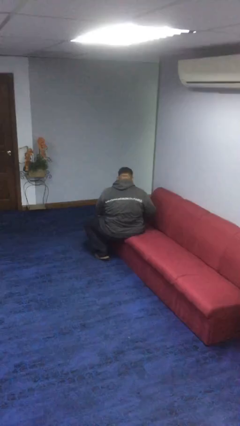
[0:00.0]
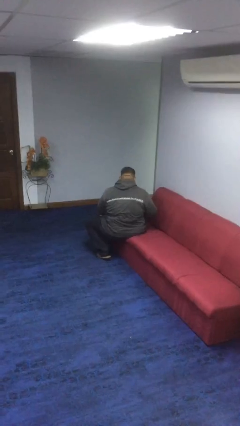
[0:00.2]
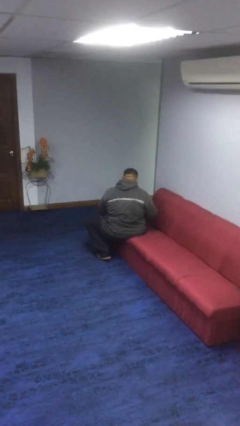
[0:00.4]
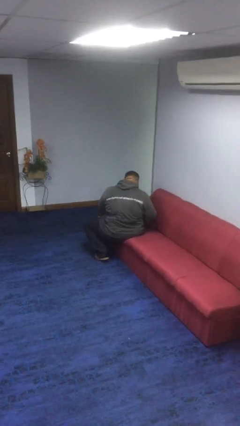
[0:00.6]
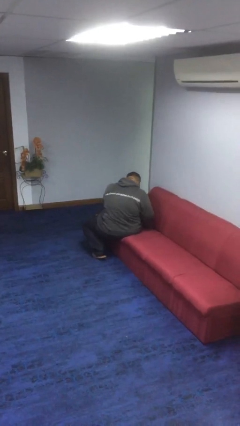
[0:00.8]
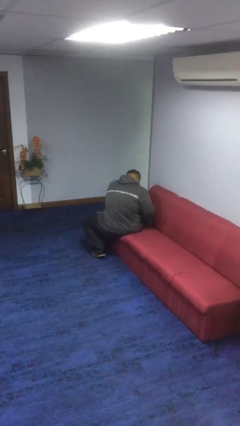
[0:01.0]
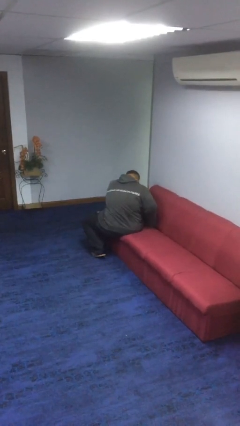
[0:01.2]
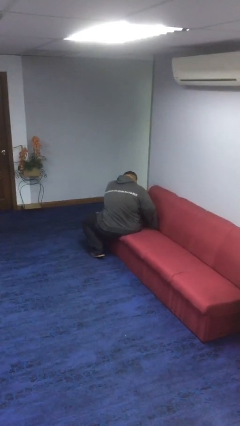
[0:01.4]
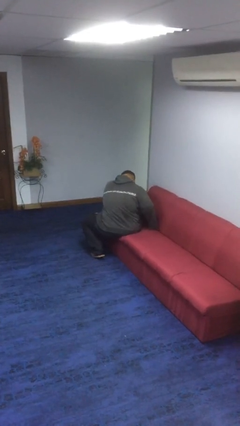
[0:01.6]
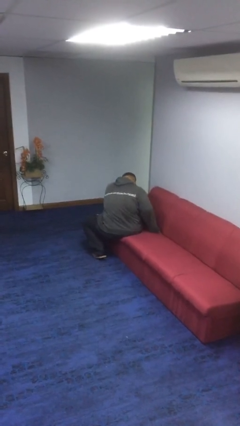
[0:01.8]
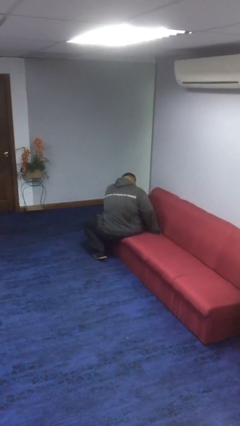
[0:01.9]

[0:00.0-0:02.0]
person searches in couch

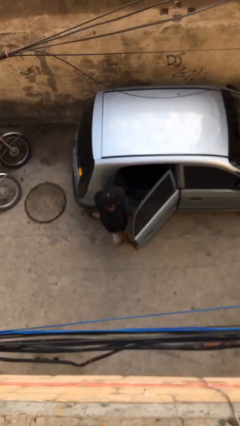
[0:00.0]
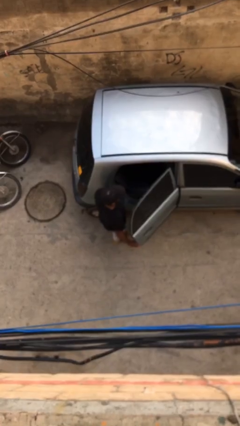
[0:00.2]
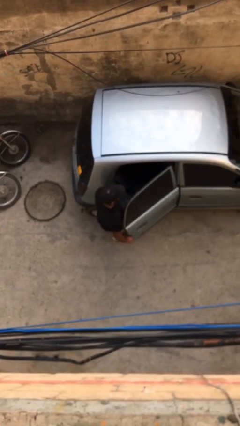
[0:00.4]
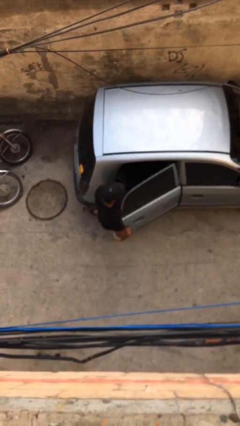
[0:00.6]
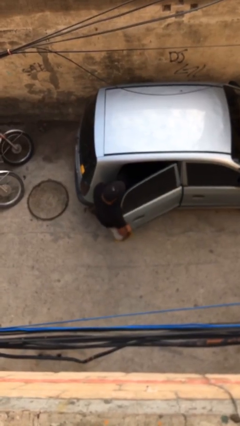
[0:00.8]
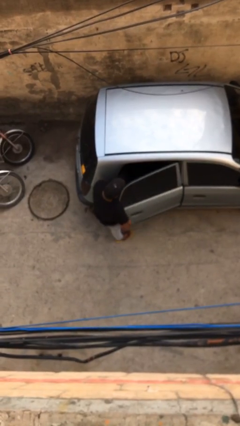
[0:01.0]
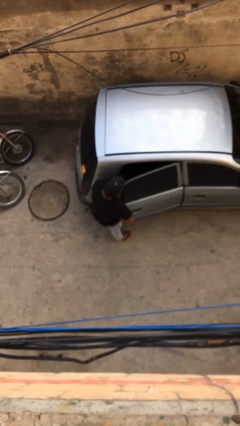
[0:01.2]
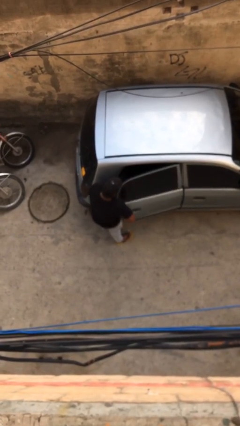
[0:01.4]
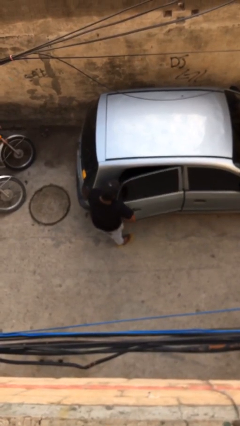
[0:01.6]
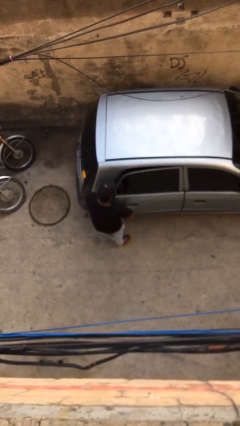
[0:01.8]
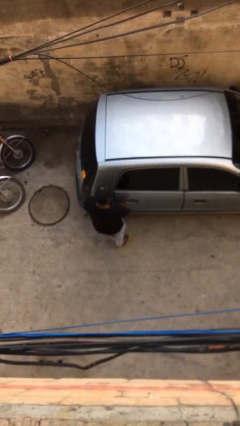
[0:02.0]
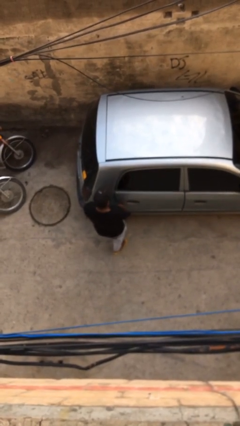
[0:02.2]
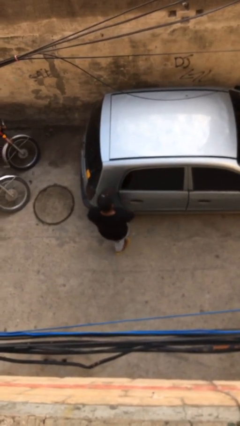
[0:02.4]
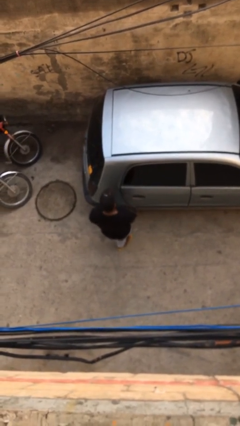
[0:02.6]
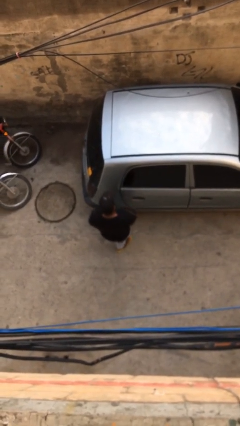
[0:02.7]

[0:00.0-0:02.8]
person closes car door

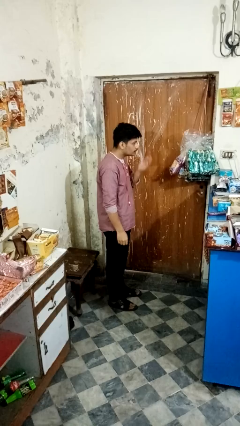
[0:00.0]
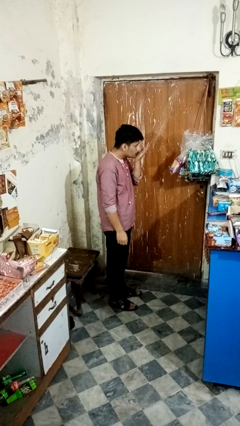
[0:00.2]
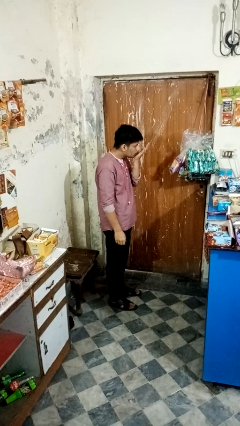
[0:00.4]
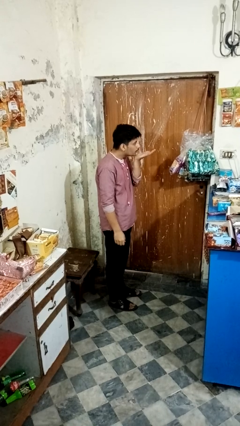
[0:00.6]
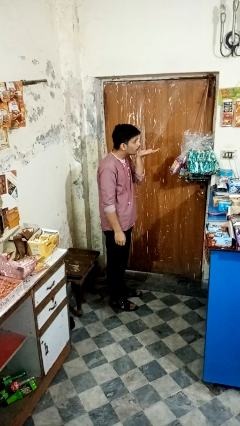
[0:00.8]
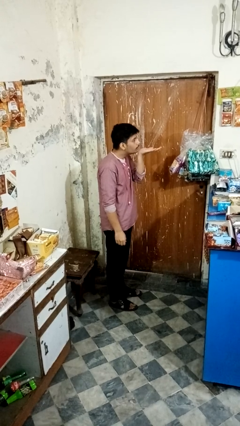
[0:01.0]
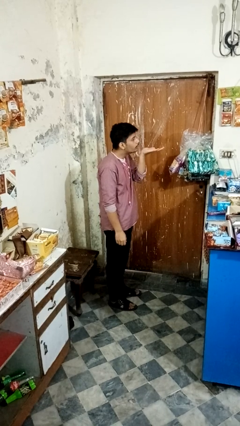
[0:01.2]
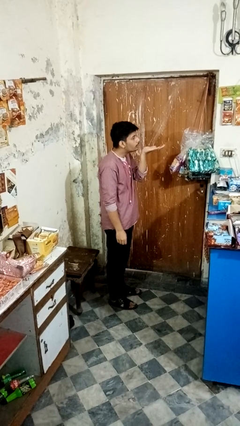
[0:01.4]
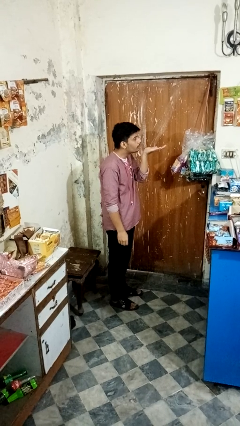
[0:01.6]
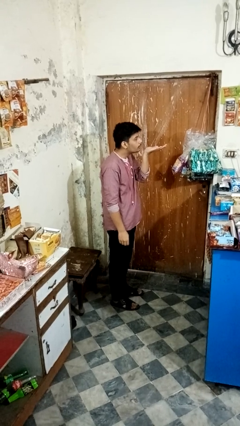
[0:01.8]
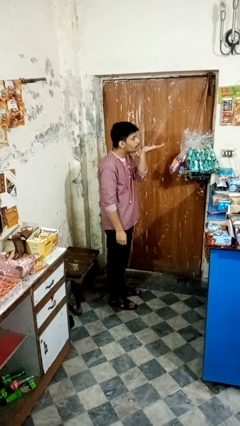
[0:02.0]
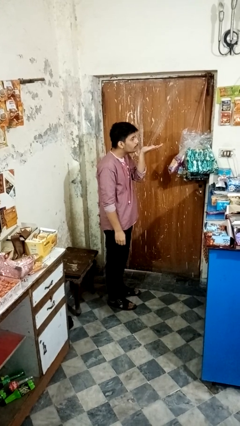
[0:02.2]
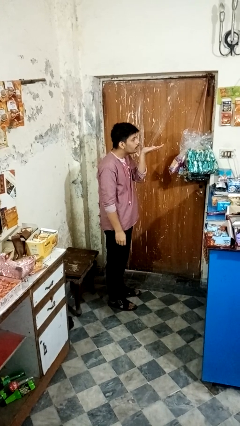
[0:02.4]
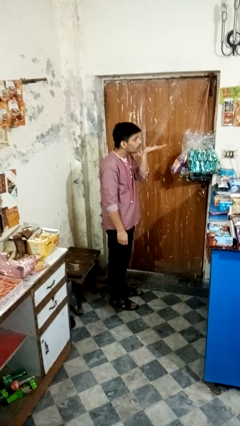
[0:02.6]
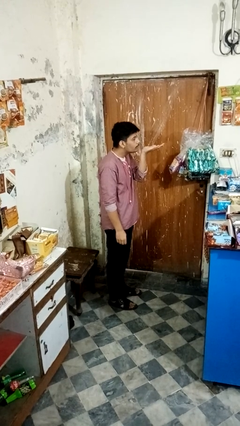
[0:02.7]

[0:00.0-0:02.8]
person gestures blow kiss

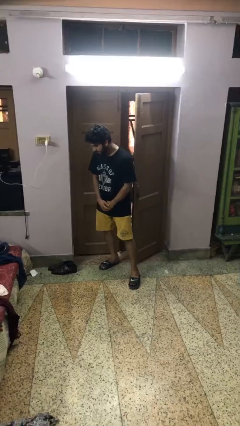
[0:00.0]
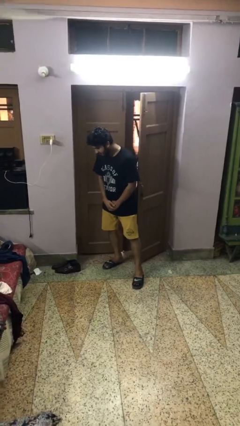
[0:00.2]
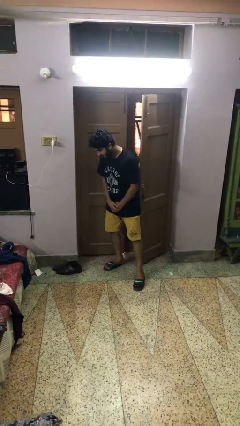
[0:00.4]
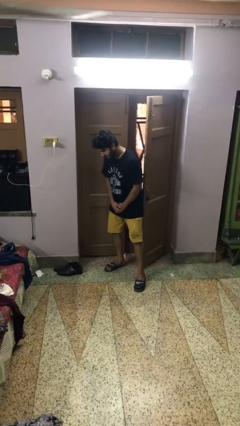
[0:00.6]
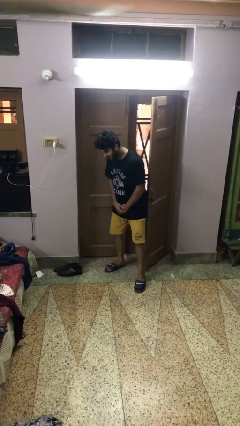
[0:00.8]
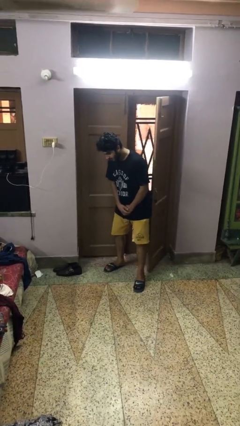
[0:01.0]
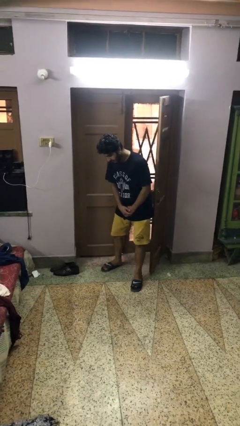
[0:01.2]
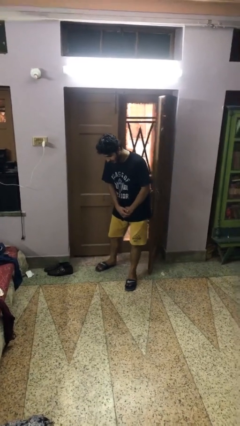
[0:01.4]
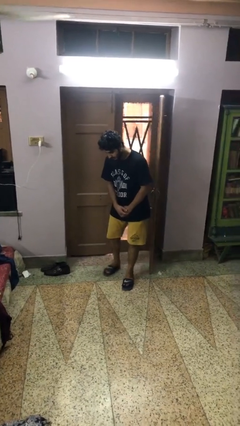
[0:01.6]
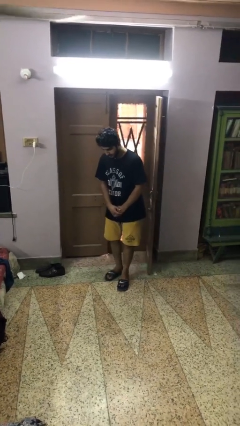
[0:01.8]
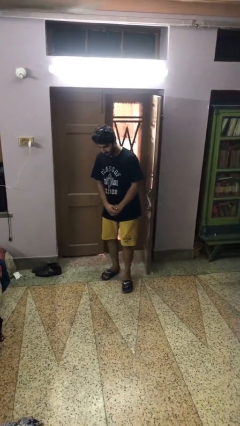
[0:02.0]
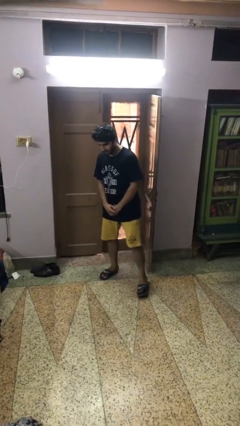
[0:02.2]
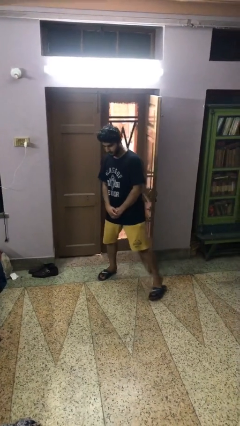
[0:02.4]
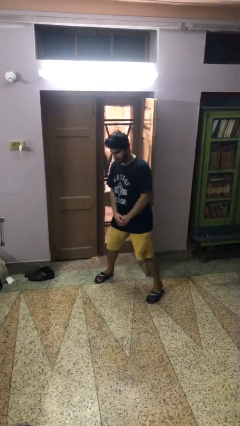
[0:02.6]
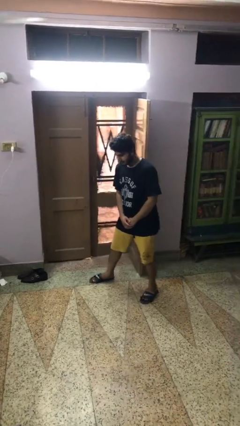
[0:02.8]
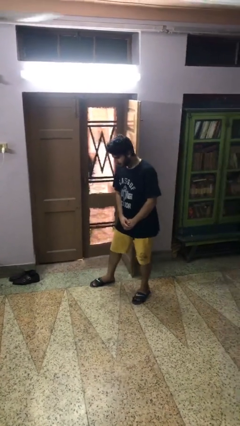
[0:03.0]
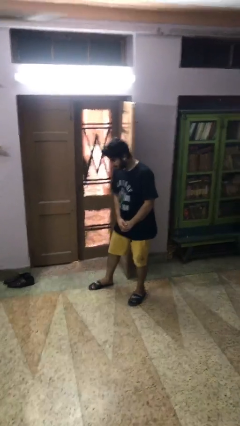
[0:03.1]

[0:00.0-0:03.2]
person opens facility door

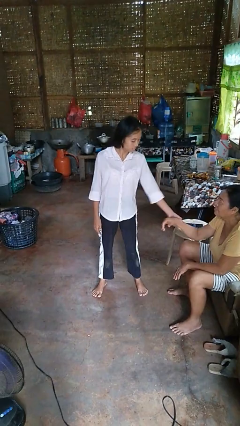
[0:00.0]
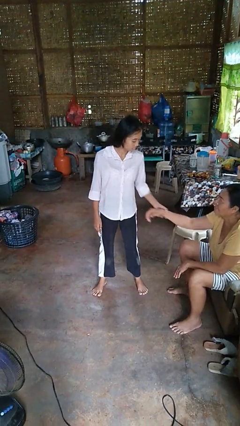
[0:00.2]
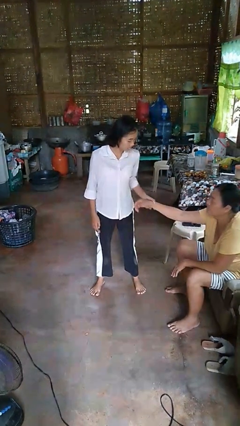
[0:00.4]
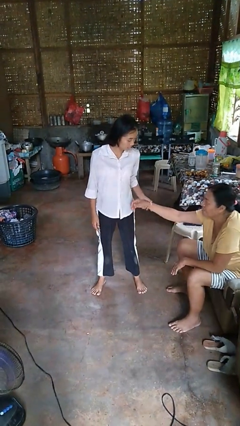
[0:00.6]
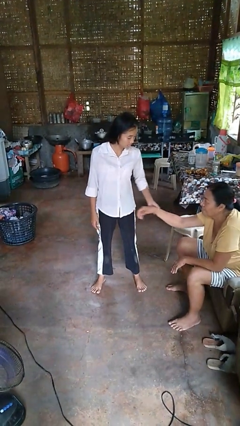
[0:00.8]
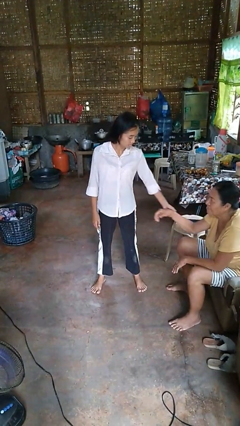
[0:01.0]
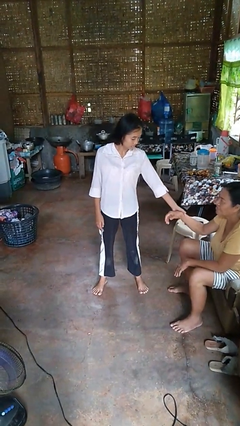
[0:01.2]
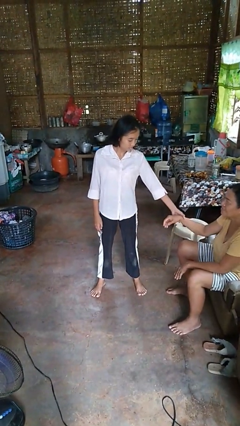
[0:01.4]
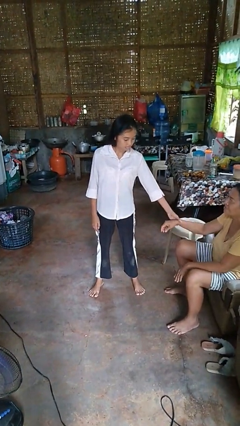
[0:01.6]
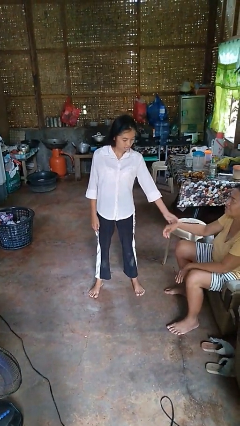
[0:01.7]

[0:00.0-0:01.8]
person grabs person by forearm

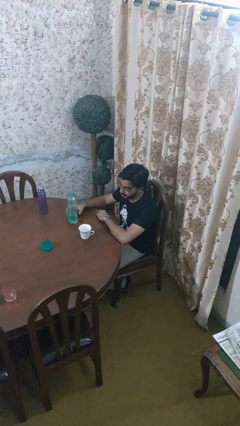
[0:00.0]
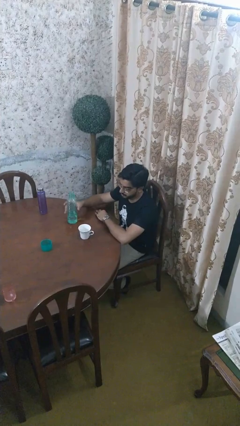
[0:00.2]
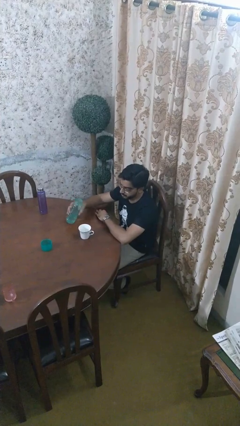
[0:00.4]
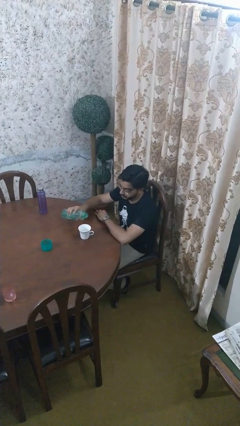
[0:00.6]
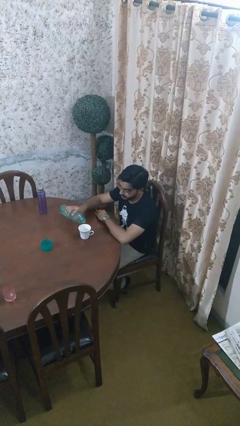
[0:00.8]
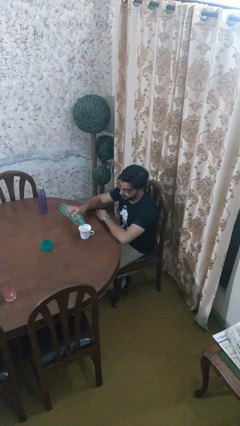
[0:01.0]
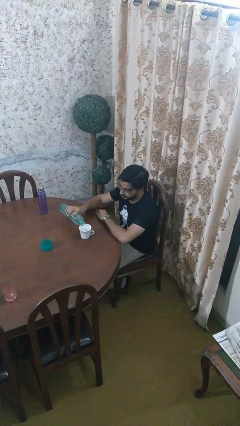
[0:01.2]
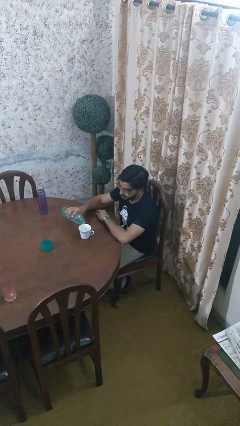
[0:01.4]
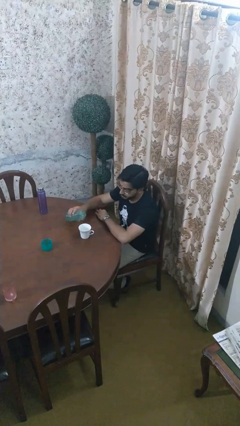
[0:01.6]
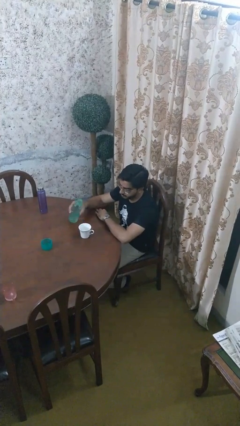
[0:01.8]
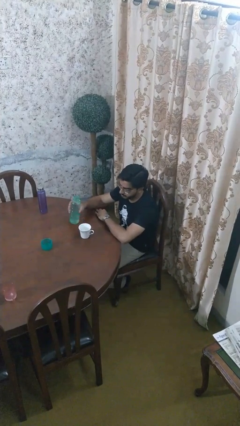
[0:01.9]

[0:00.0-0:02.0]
person pours liquid into cup

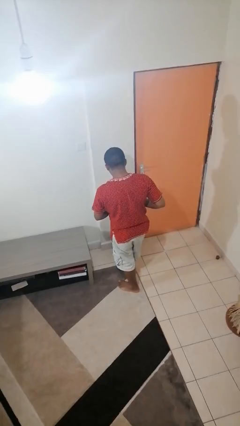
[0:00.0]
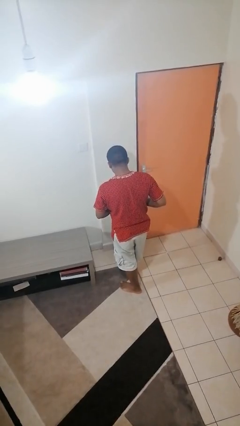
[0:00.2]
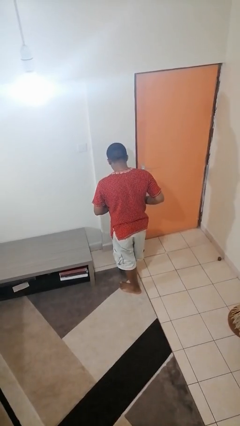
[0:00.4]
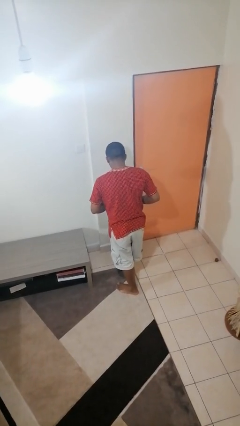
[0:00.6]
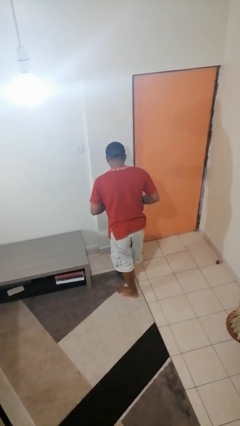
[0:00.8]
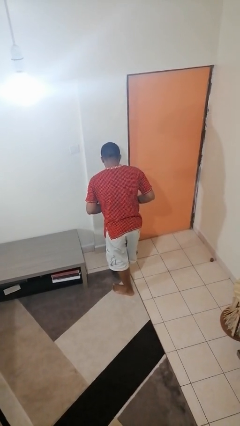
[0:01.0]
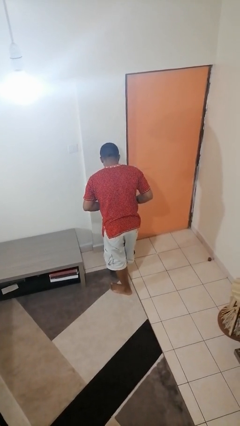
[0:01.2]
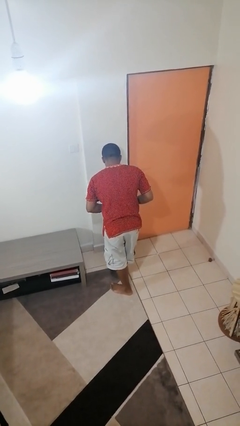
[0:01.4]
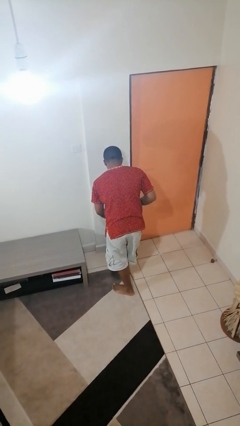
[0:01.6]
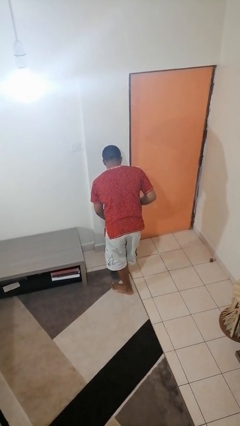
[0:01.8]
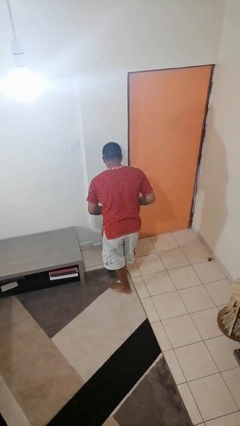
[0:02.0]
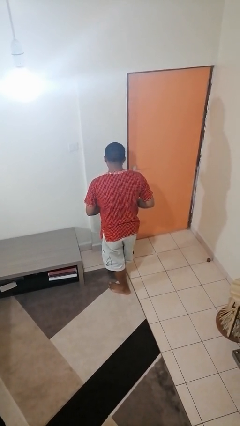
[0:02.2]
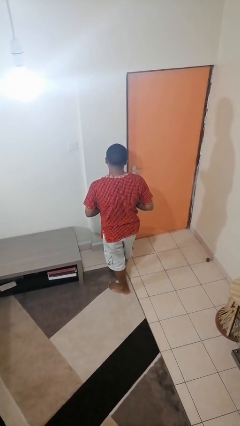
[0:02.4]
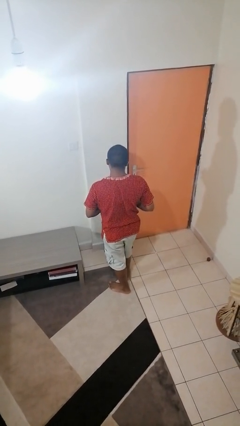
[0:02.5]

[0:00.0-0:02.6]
person discards trash
